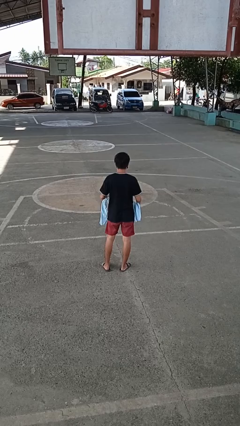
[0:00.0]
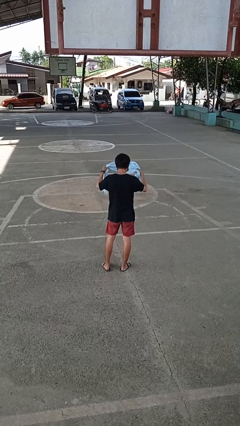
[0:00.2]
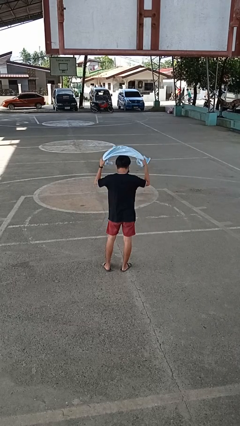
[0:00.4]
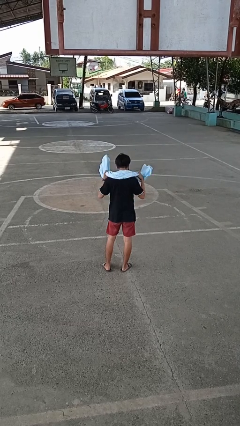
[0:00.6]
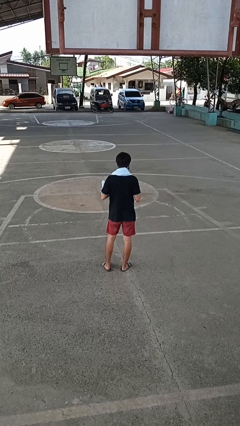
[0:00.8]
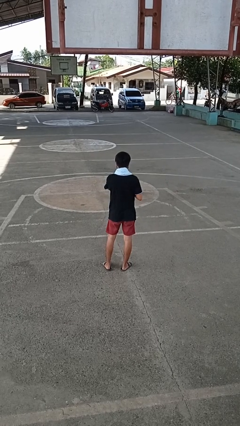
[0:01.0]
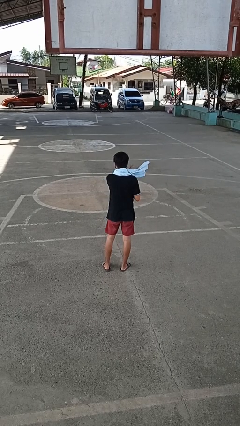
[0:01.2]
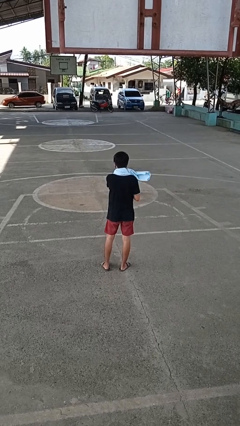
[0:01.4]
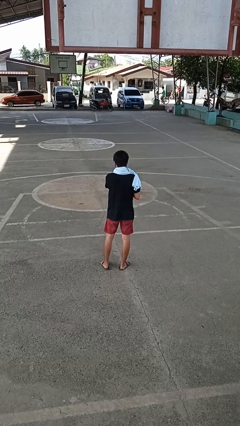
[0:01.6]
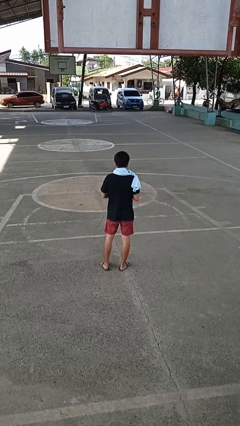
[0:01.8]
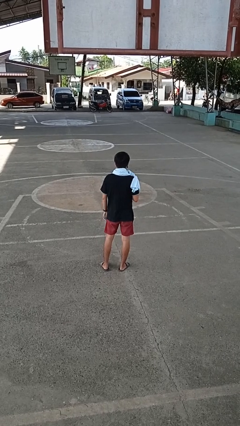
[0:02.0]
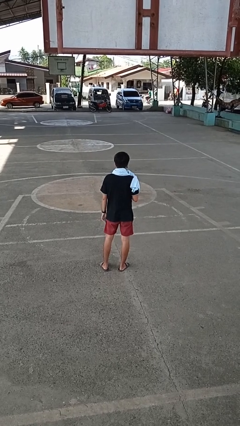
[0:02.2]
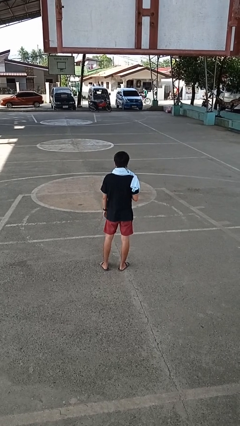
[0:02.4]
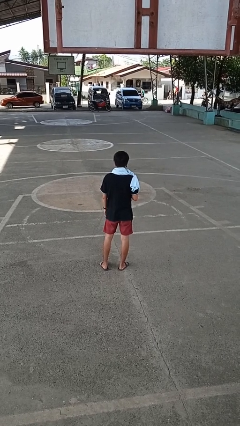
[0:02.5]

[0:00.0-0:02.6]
person puts on scarf

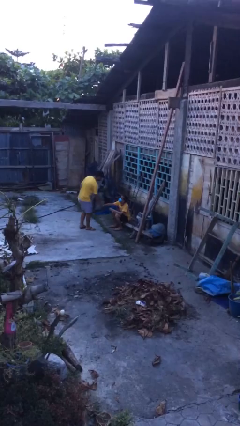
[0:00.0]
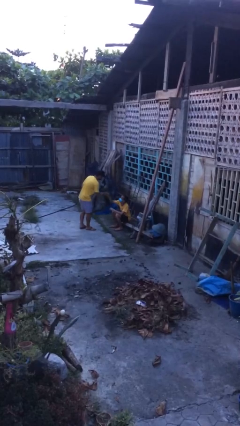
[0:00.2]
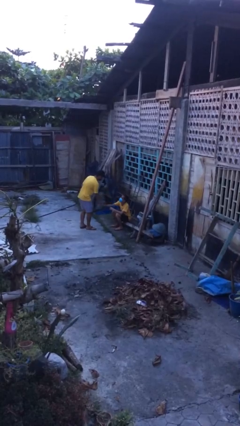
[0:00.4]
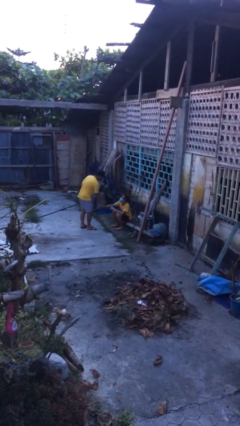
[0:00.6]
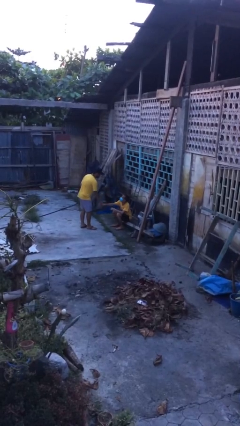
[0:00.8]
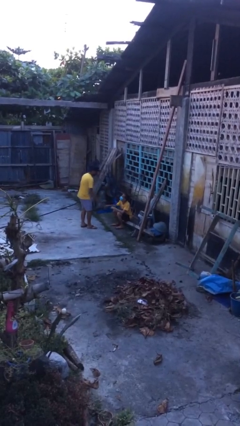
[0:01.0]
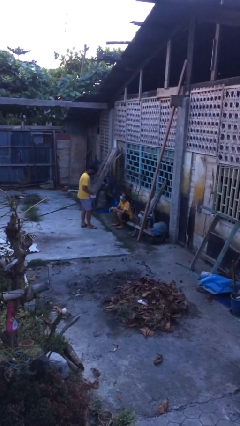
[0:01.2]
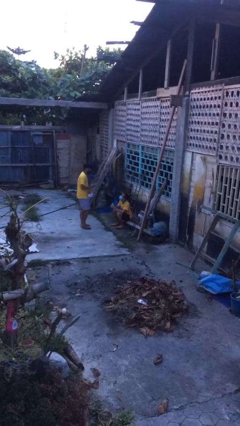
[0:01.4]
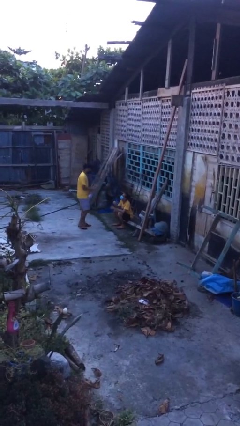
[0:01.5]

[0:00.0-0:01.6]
person shakes hand

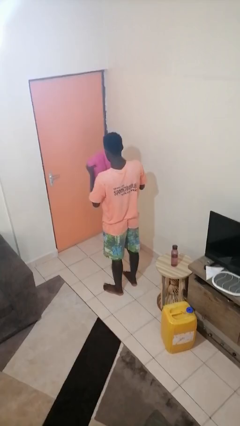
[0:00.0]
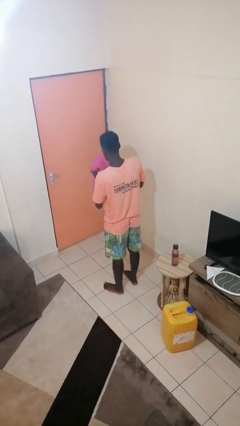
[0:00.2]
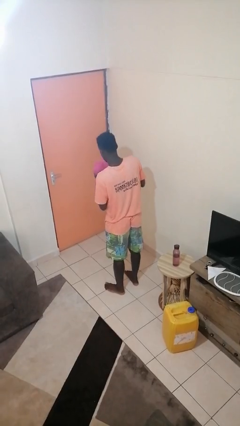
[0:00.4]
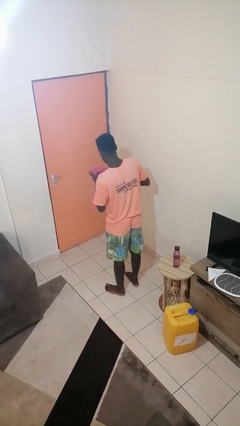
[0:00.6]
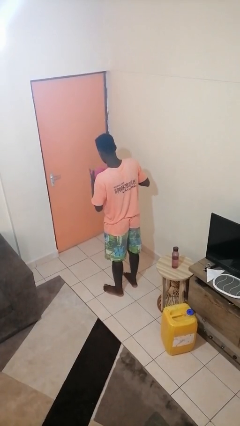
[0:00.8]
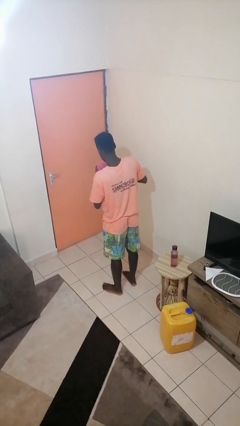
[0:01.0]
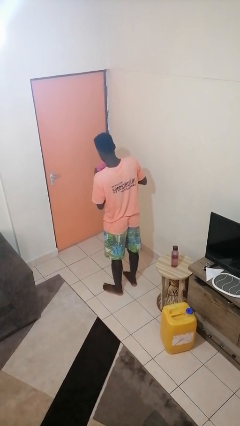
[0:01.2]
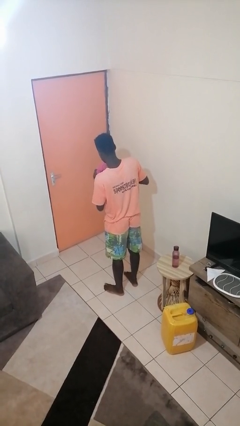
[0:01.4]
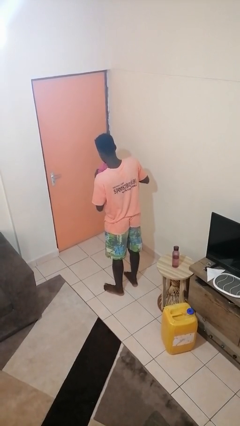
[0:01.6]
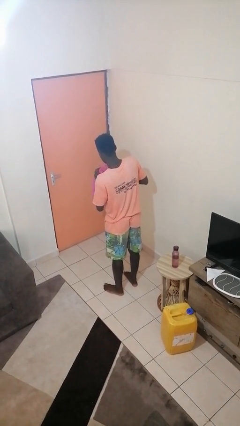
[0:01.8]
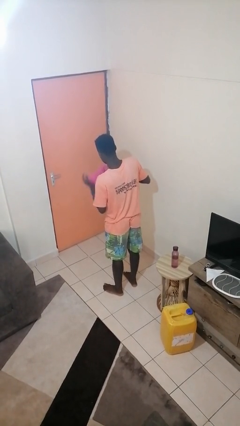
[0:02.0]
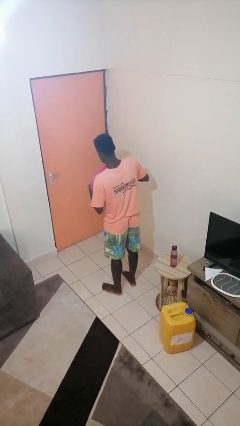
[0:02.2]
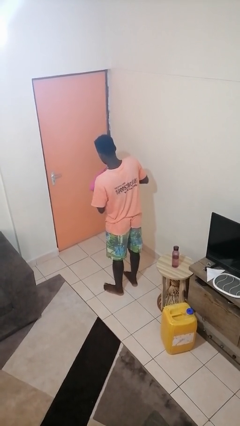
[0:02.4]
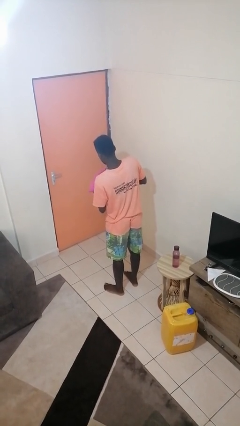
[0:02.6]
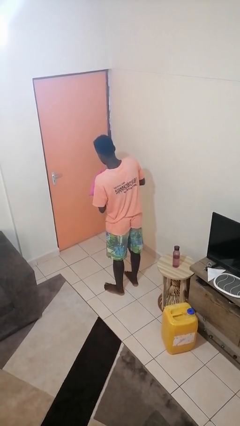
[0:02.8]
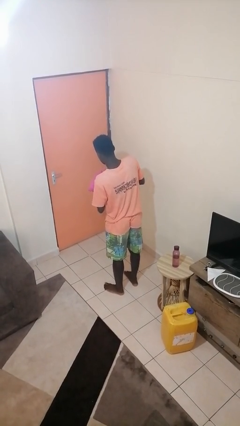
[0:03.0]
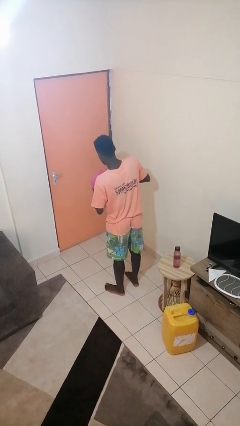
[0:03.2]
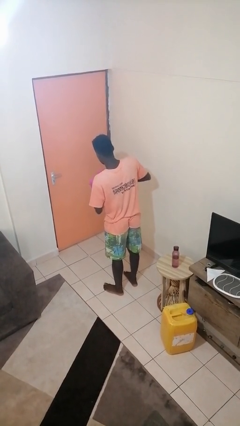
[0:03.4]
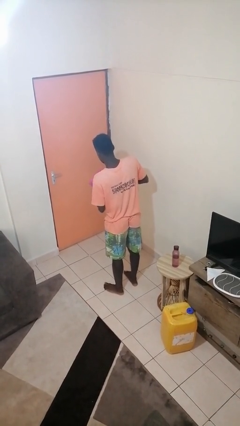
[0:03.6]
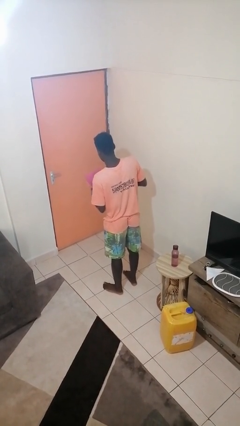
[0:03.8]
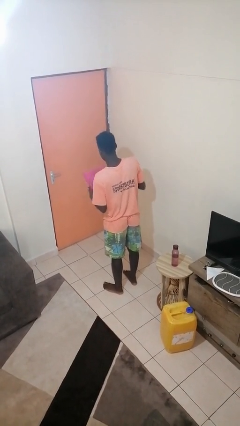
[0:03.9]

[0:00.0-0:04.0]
person squeezes object

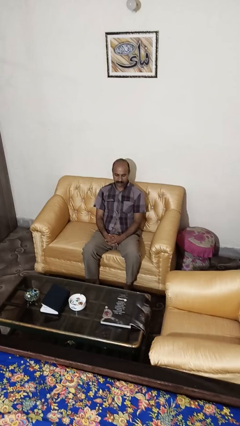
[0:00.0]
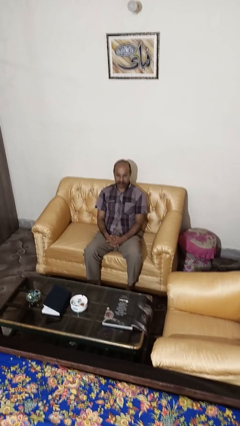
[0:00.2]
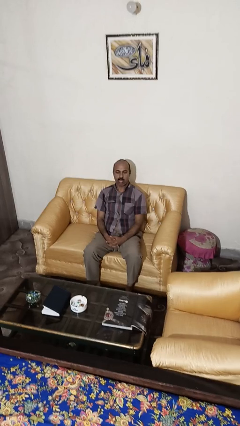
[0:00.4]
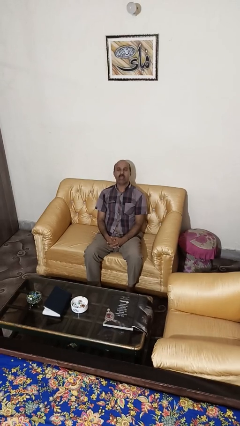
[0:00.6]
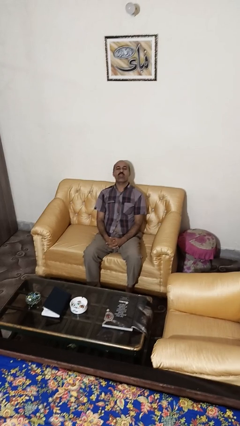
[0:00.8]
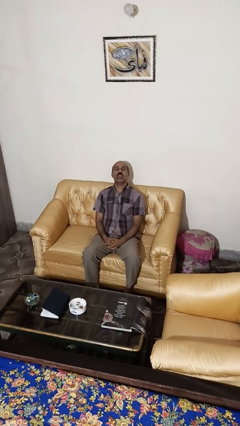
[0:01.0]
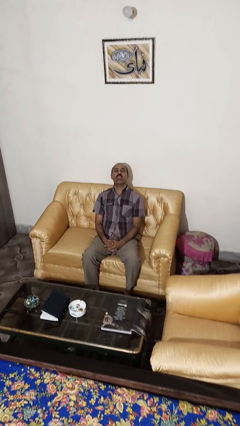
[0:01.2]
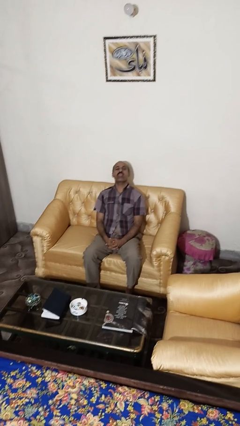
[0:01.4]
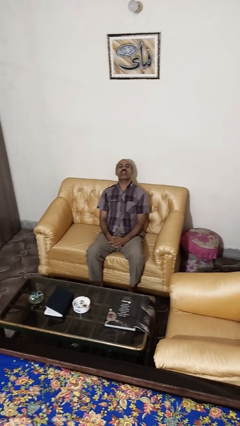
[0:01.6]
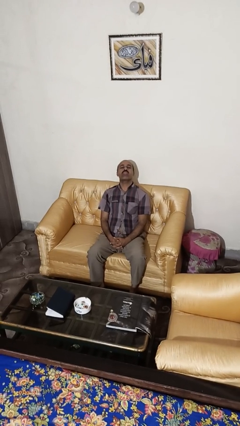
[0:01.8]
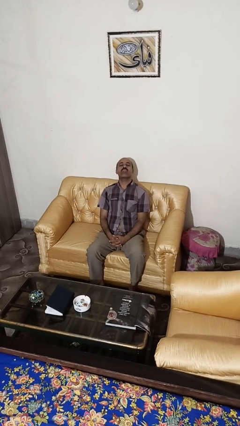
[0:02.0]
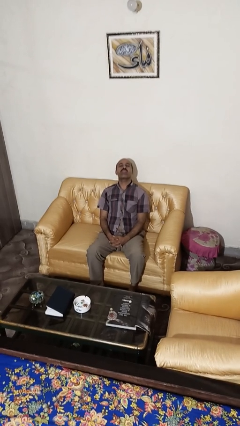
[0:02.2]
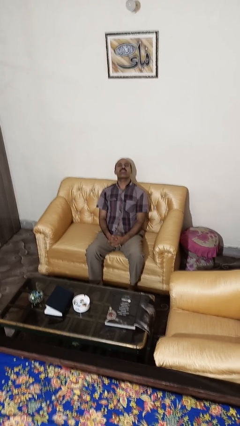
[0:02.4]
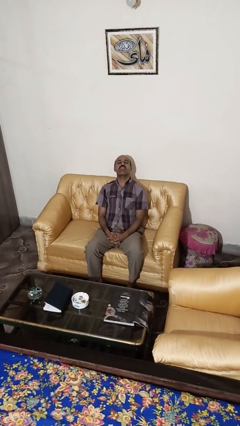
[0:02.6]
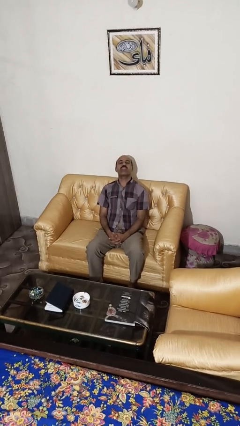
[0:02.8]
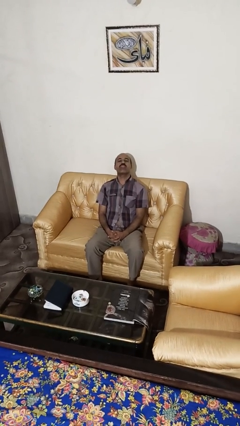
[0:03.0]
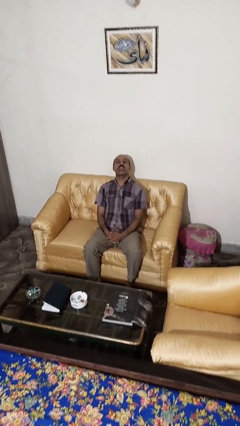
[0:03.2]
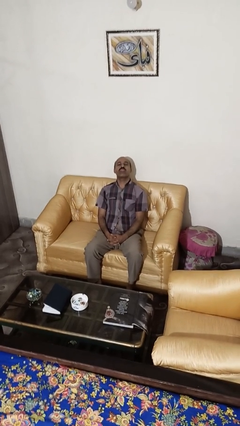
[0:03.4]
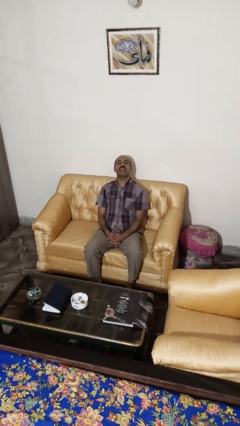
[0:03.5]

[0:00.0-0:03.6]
person sticks out tongue

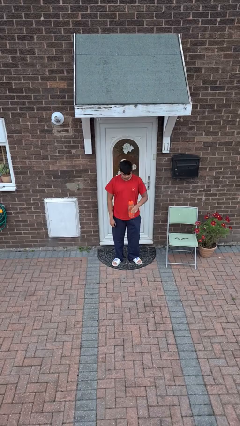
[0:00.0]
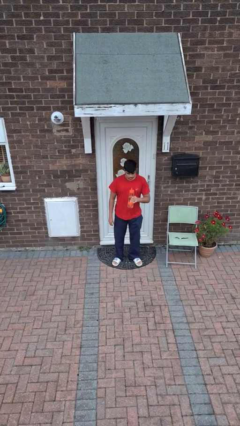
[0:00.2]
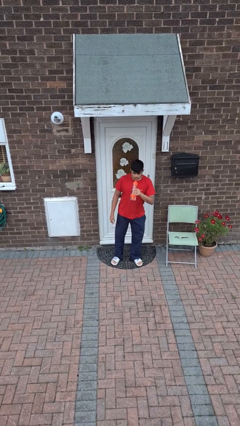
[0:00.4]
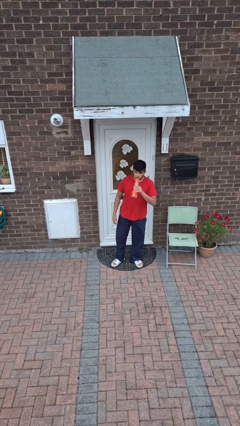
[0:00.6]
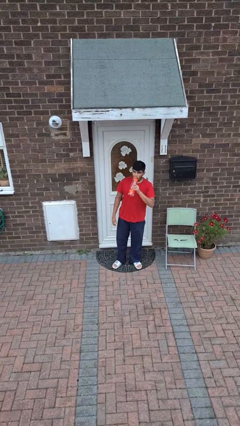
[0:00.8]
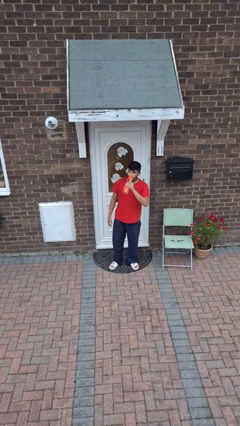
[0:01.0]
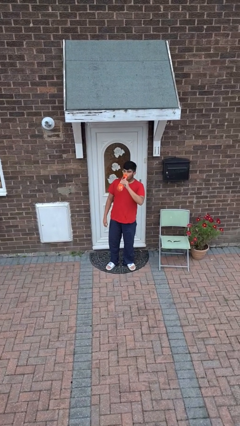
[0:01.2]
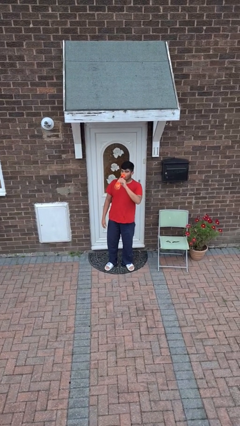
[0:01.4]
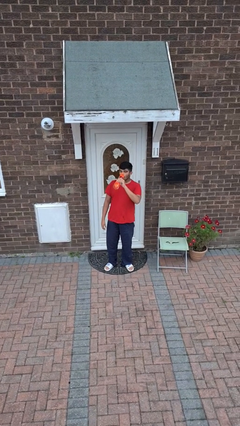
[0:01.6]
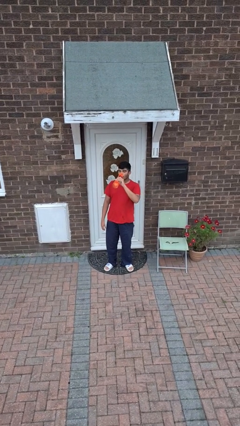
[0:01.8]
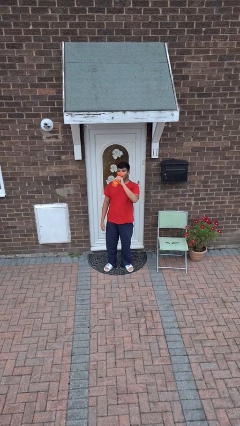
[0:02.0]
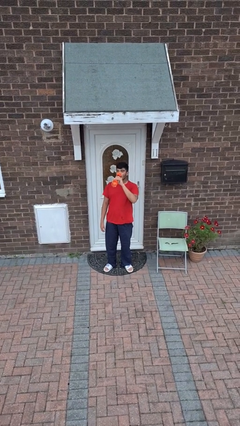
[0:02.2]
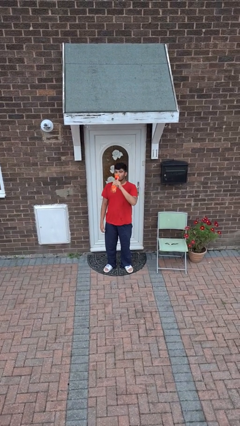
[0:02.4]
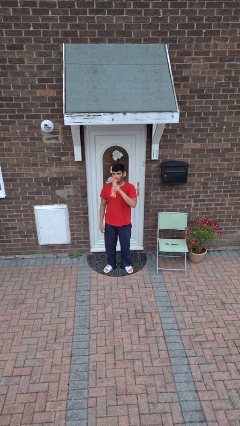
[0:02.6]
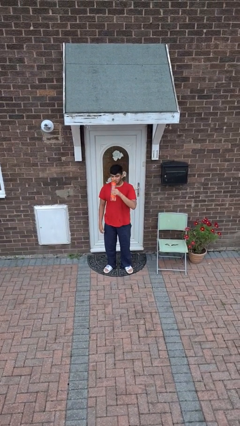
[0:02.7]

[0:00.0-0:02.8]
person drinks from bottle

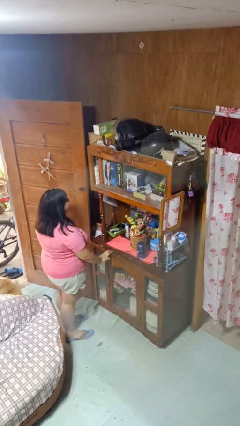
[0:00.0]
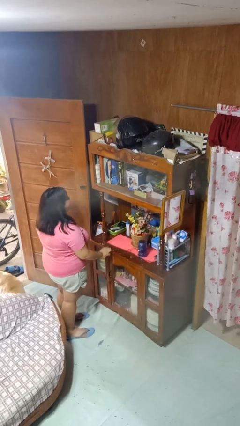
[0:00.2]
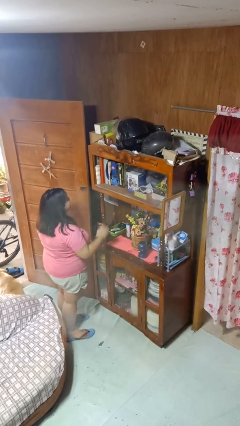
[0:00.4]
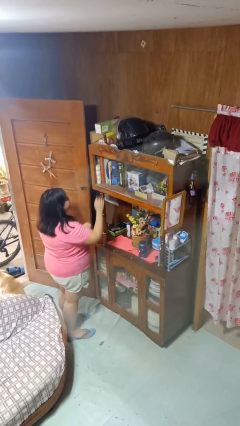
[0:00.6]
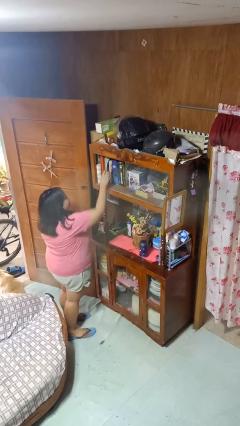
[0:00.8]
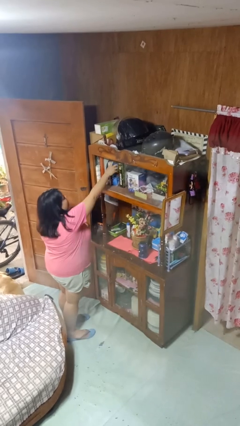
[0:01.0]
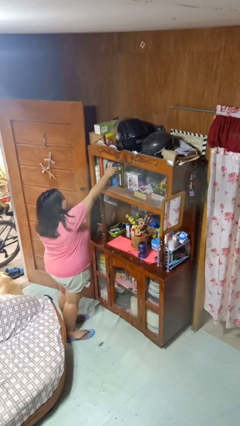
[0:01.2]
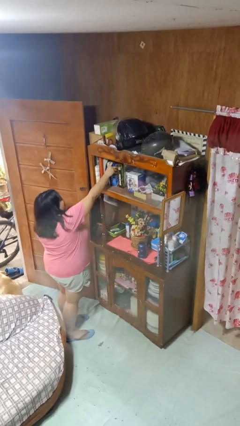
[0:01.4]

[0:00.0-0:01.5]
person picks up object from shelf

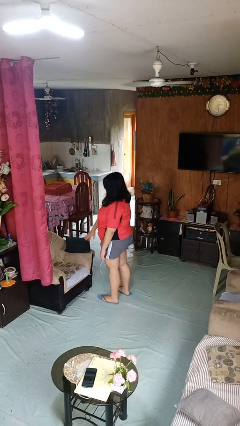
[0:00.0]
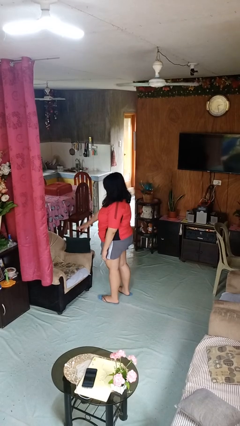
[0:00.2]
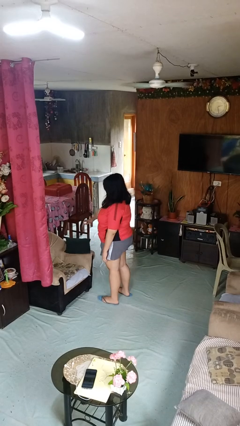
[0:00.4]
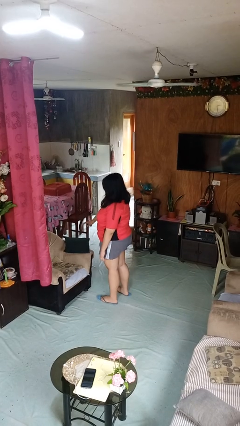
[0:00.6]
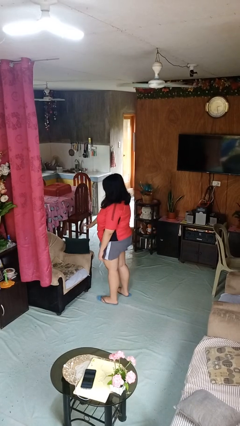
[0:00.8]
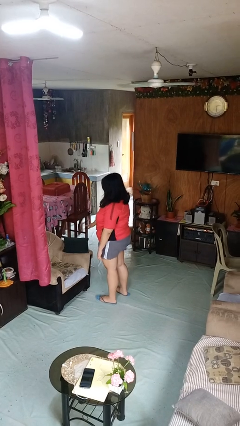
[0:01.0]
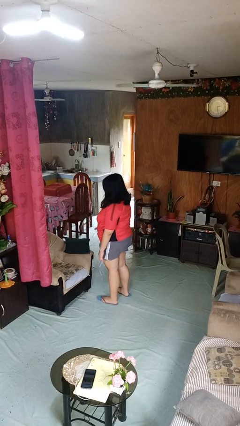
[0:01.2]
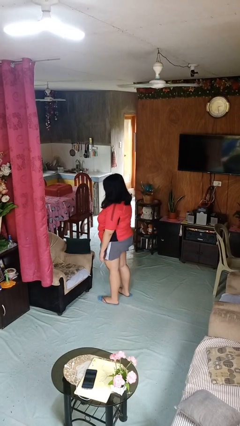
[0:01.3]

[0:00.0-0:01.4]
person waves hand over object
